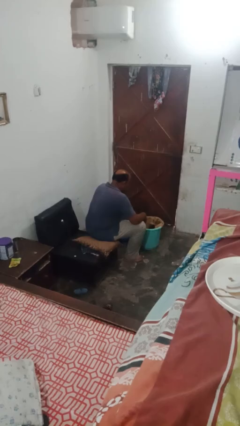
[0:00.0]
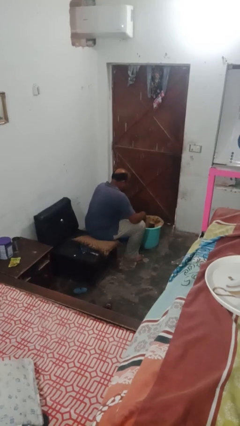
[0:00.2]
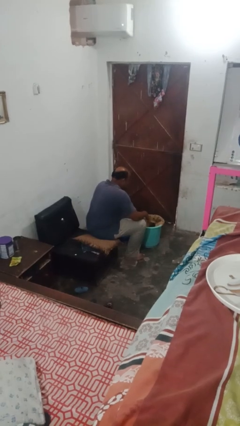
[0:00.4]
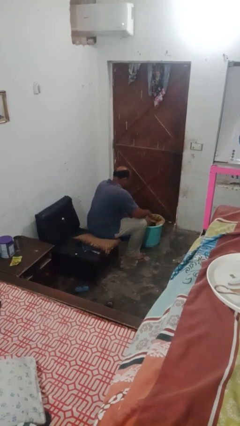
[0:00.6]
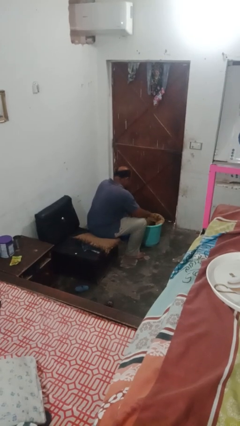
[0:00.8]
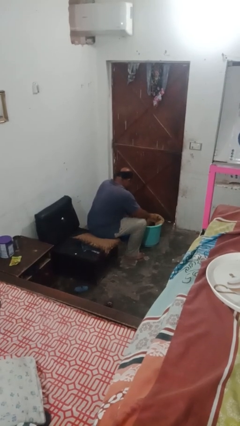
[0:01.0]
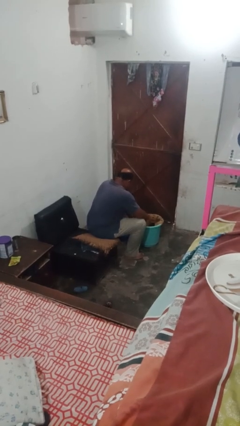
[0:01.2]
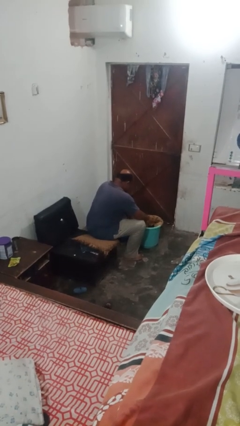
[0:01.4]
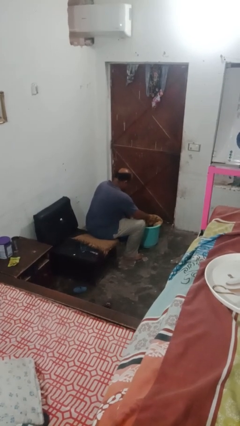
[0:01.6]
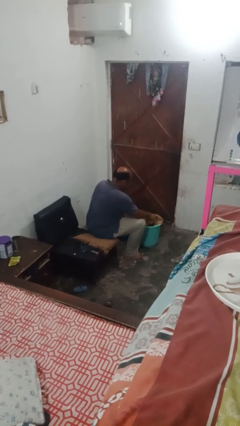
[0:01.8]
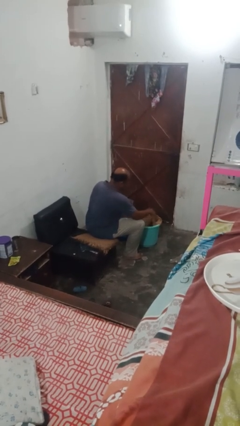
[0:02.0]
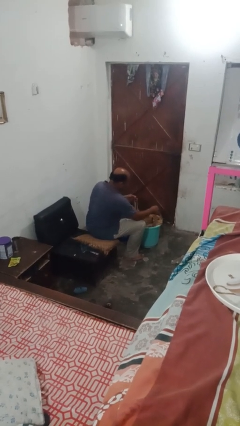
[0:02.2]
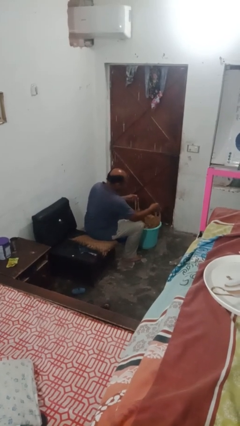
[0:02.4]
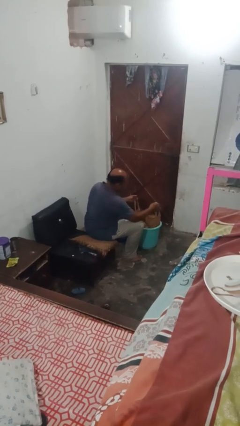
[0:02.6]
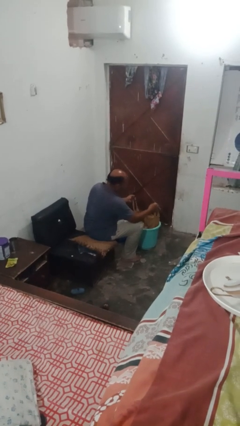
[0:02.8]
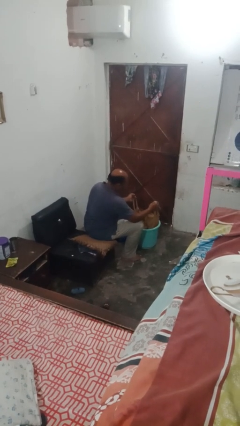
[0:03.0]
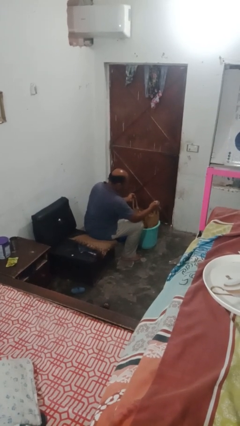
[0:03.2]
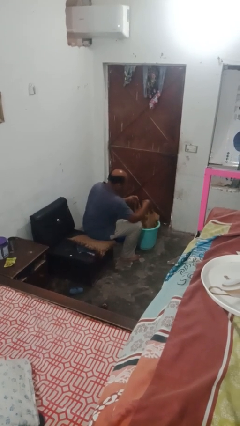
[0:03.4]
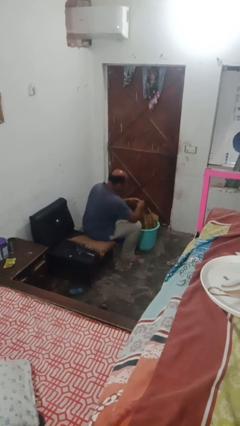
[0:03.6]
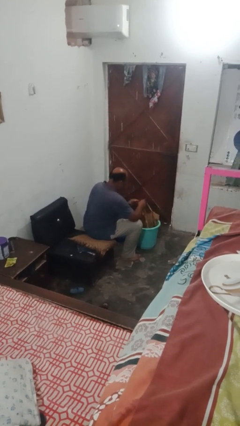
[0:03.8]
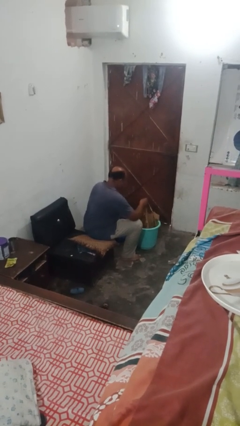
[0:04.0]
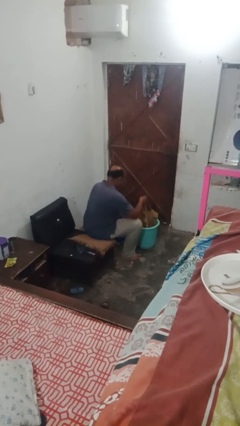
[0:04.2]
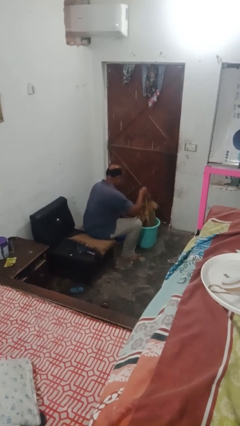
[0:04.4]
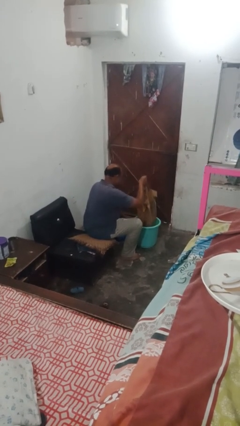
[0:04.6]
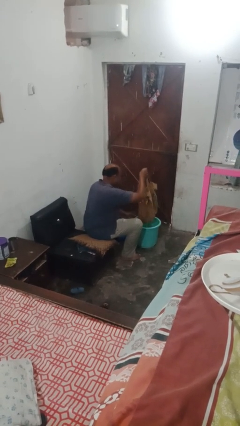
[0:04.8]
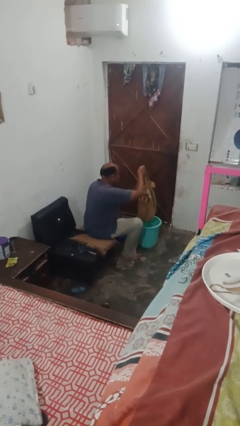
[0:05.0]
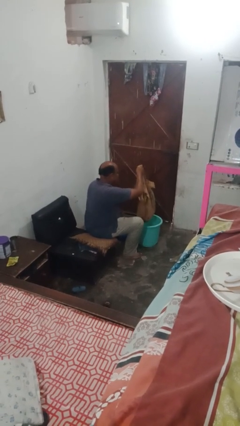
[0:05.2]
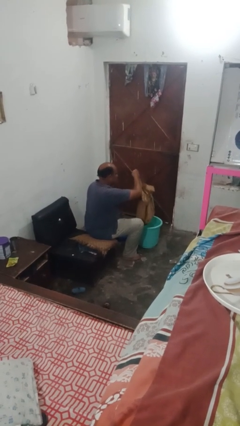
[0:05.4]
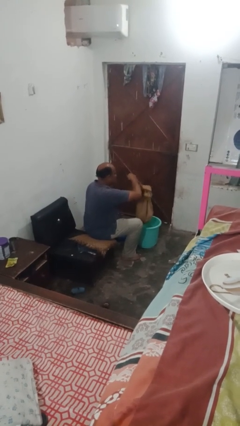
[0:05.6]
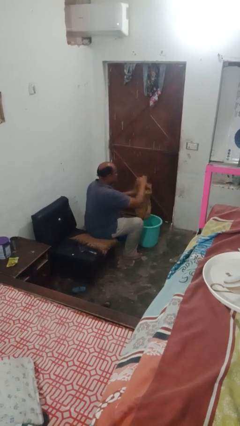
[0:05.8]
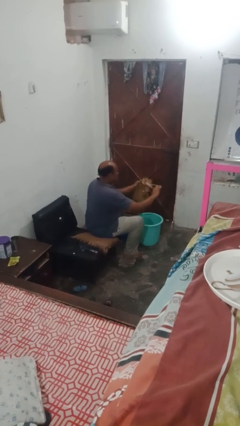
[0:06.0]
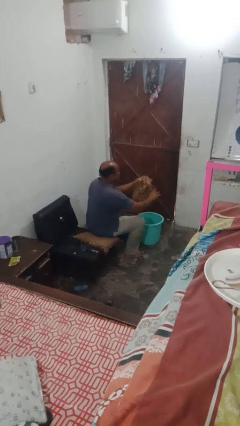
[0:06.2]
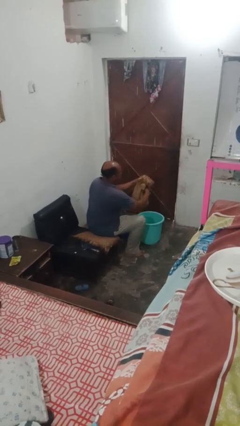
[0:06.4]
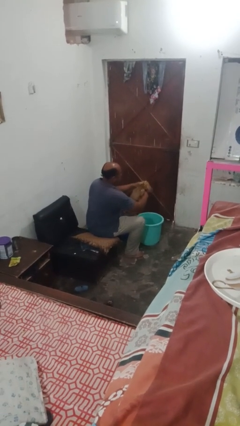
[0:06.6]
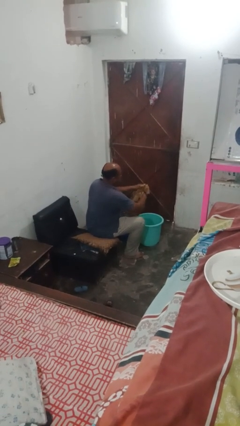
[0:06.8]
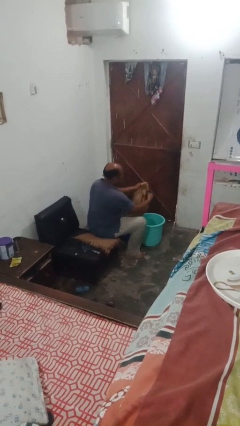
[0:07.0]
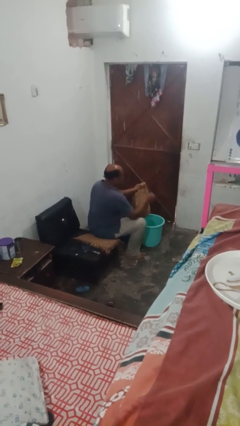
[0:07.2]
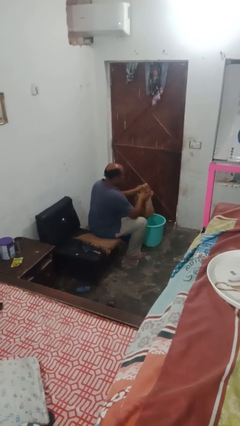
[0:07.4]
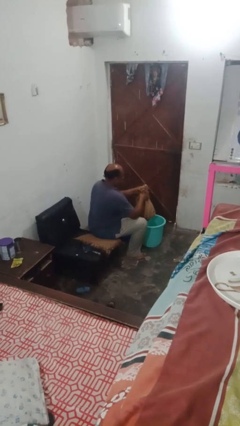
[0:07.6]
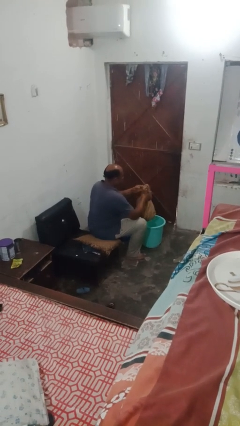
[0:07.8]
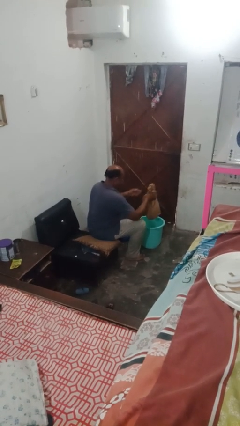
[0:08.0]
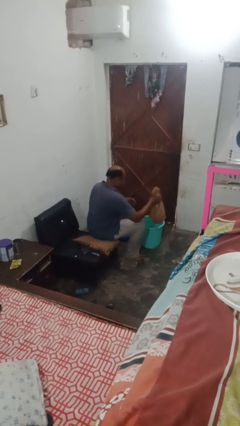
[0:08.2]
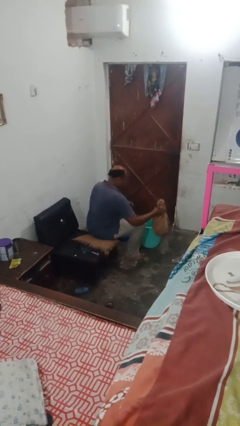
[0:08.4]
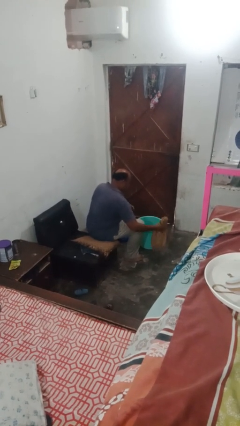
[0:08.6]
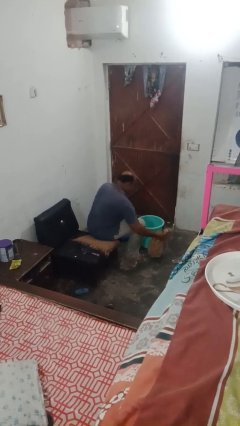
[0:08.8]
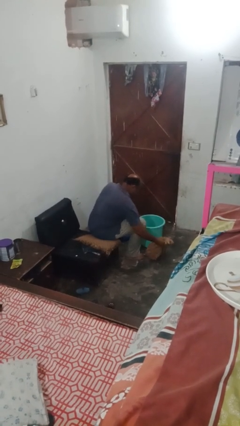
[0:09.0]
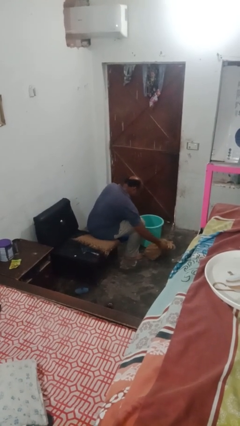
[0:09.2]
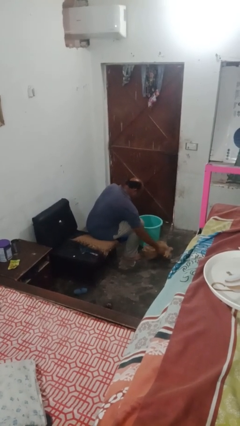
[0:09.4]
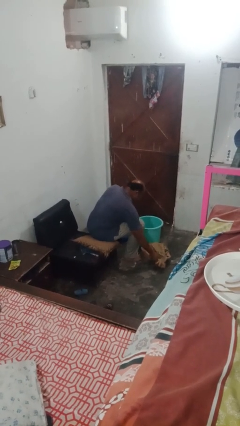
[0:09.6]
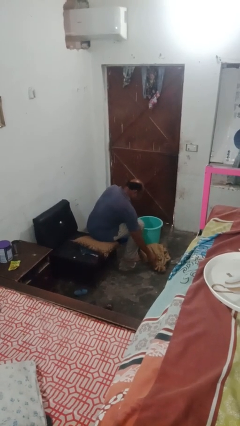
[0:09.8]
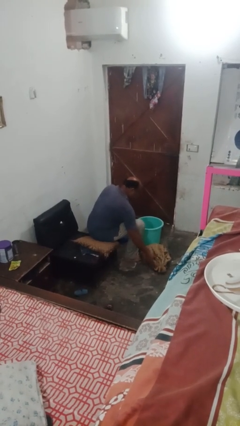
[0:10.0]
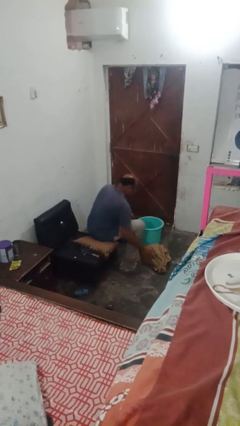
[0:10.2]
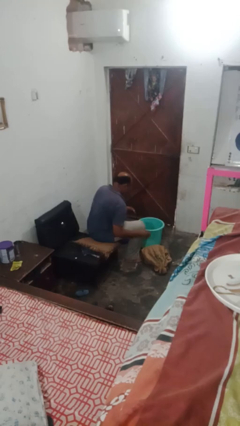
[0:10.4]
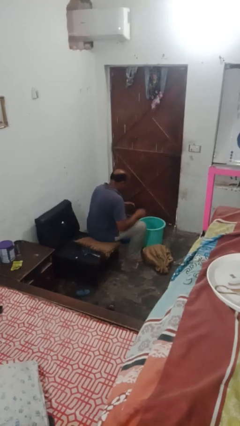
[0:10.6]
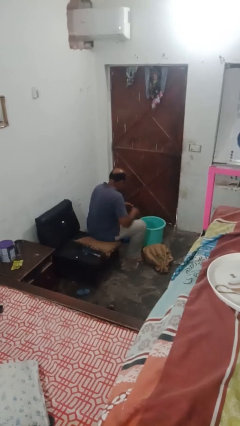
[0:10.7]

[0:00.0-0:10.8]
person removes trashbag from trashcan

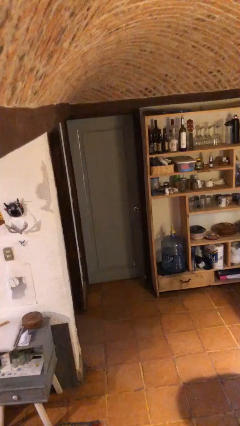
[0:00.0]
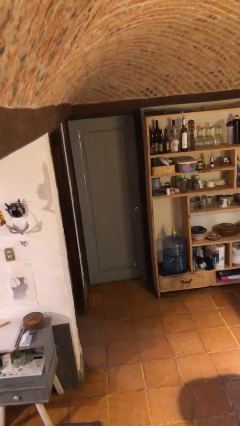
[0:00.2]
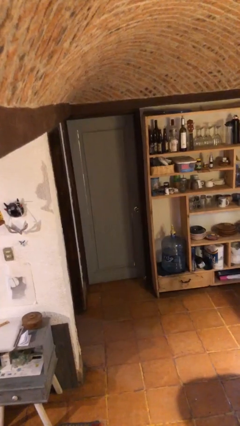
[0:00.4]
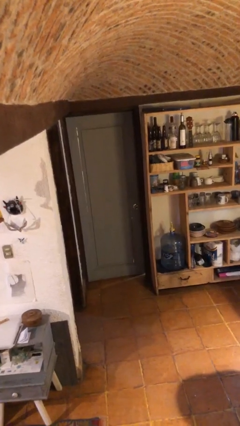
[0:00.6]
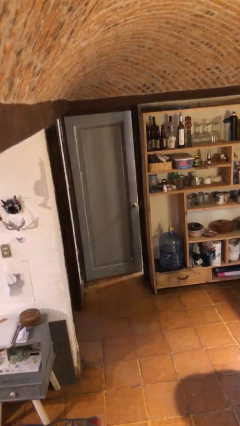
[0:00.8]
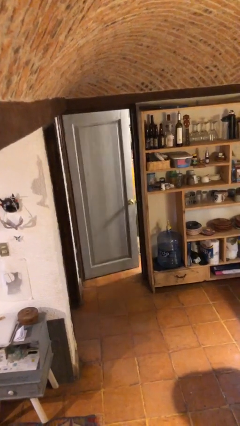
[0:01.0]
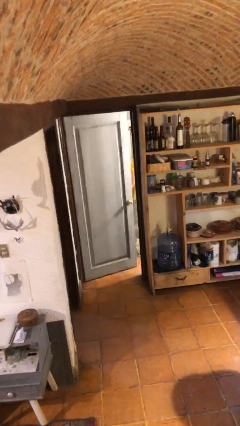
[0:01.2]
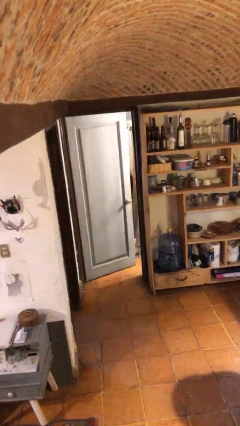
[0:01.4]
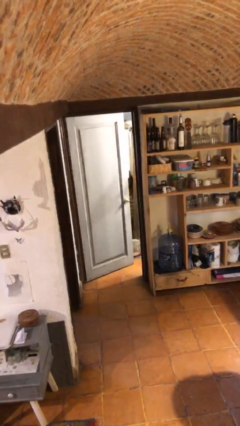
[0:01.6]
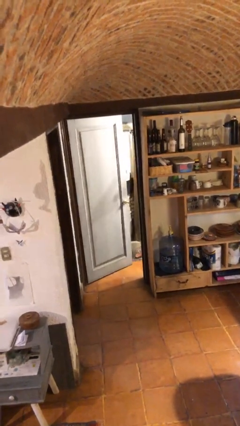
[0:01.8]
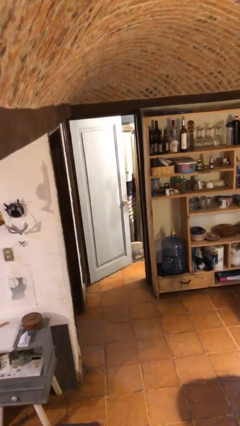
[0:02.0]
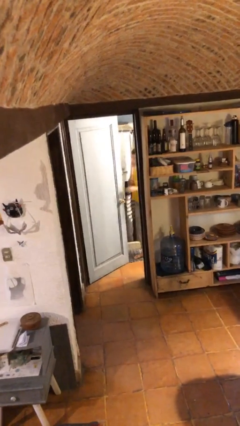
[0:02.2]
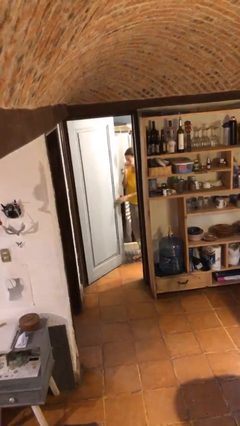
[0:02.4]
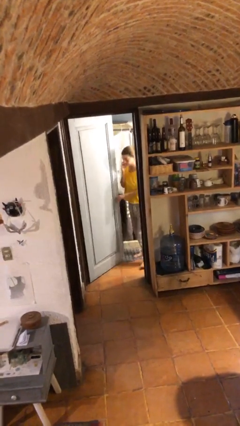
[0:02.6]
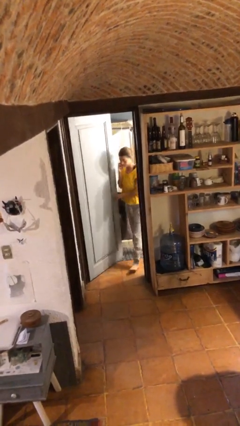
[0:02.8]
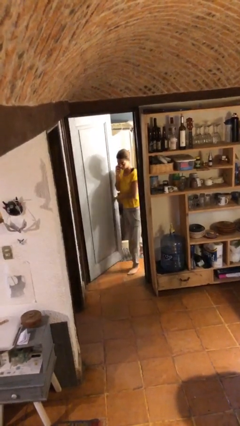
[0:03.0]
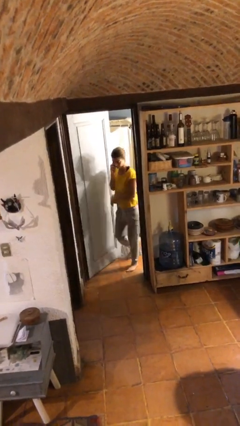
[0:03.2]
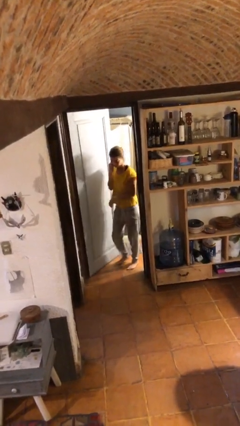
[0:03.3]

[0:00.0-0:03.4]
person opens facility door

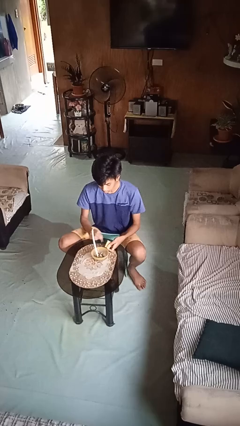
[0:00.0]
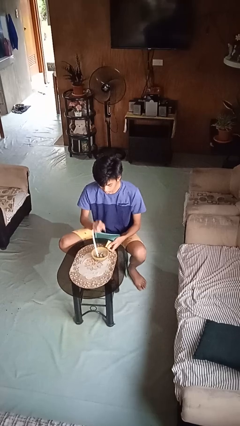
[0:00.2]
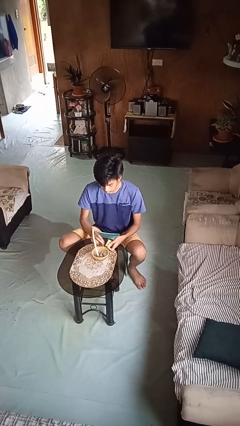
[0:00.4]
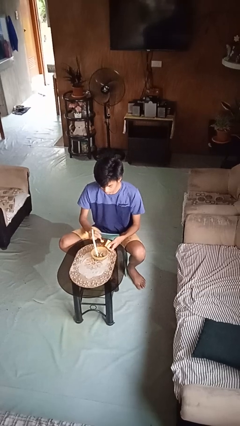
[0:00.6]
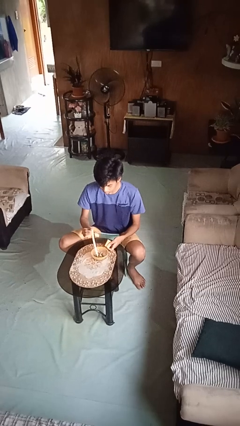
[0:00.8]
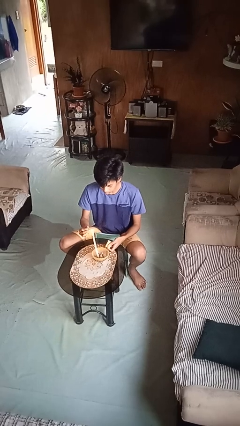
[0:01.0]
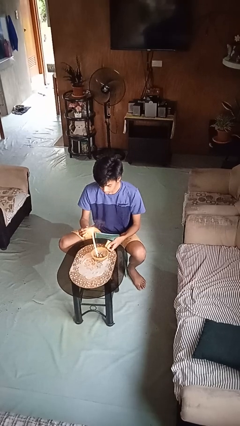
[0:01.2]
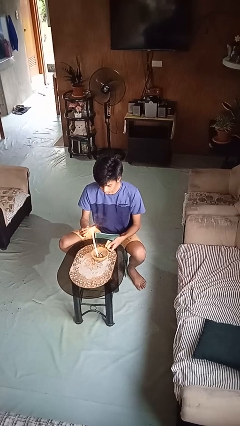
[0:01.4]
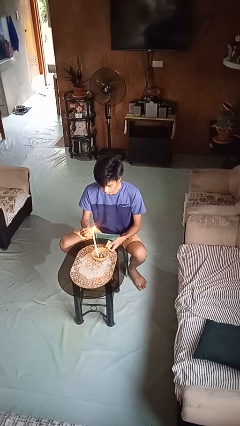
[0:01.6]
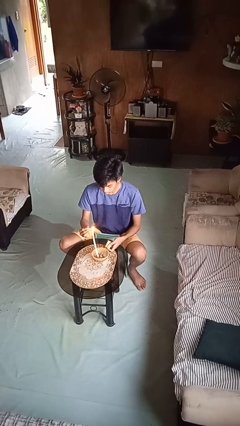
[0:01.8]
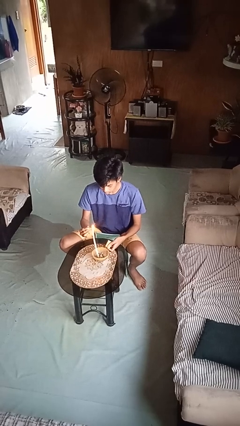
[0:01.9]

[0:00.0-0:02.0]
person lights candle

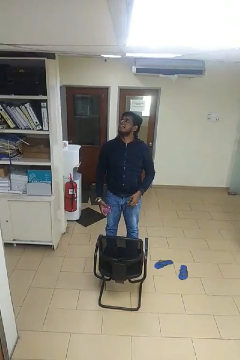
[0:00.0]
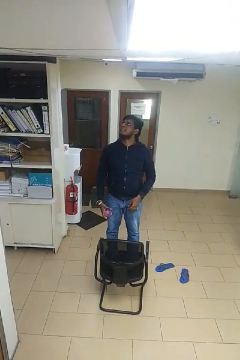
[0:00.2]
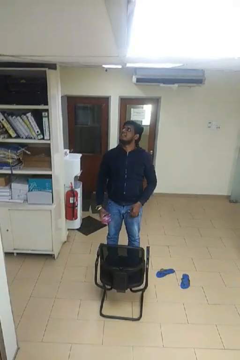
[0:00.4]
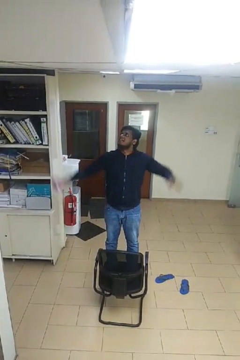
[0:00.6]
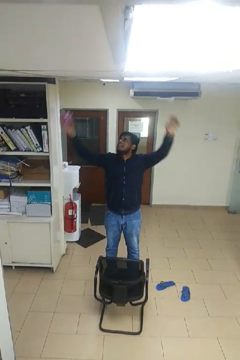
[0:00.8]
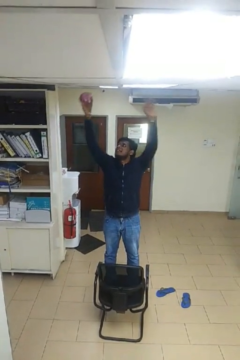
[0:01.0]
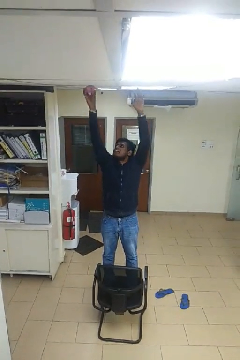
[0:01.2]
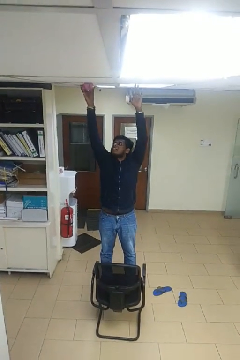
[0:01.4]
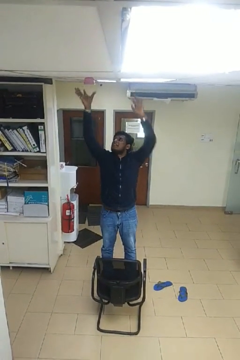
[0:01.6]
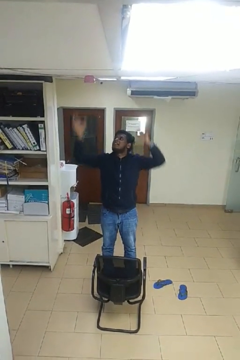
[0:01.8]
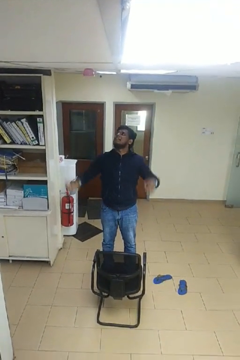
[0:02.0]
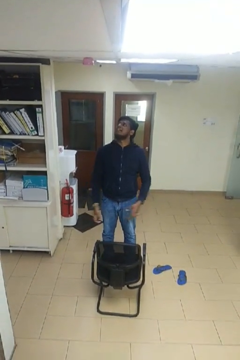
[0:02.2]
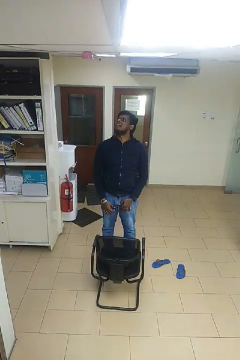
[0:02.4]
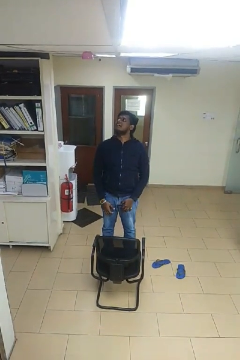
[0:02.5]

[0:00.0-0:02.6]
person puts up smoke detector
